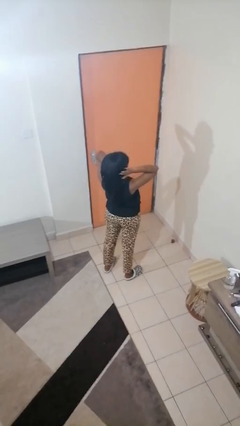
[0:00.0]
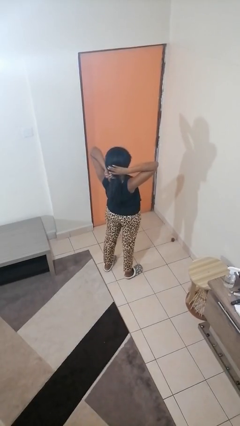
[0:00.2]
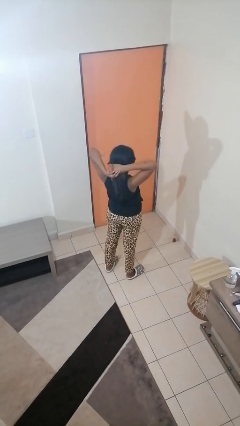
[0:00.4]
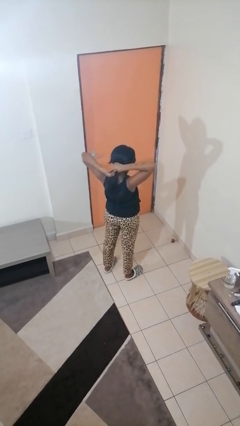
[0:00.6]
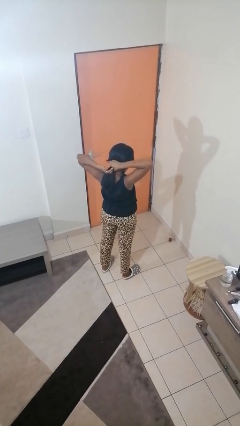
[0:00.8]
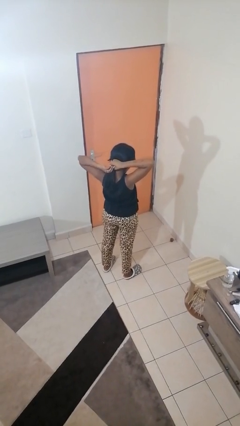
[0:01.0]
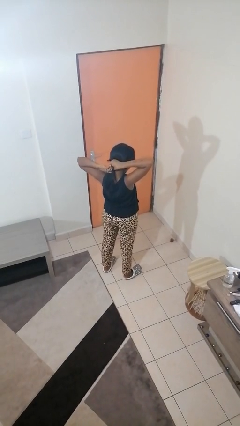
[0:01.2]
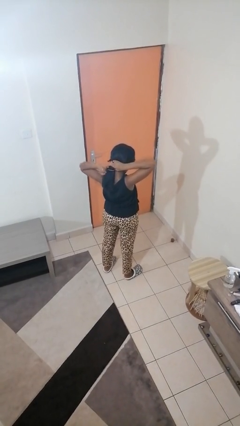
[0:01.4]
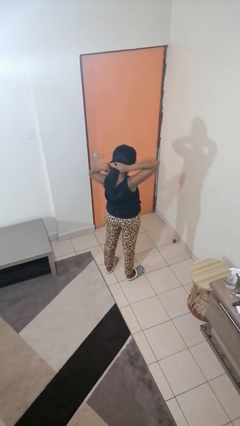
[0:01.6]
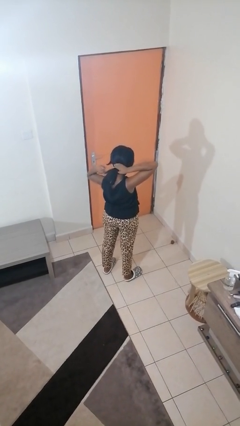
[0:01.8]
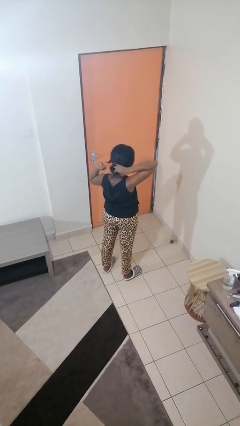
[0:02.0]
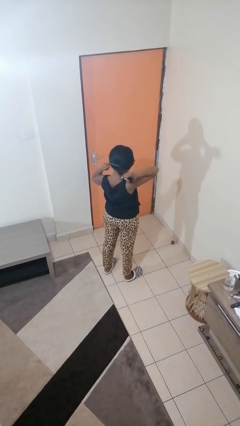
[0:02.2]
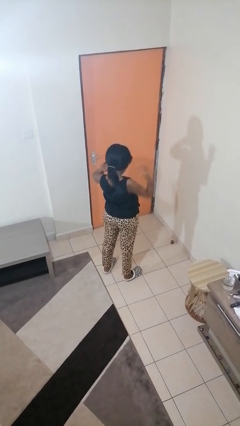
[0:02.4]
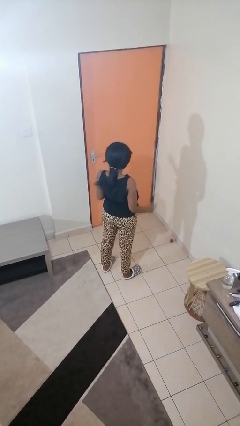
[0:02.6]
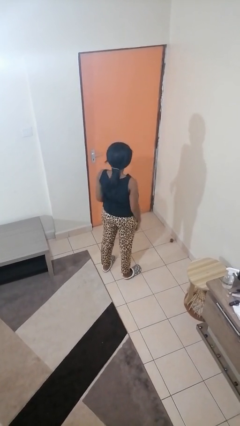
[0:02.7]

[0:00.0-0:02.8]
person puts hair in ponytail

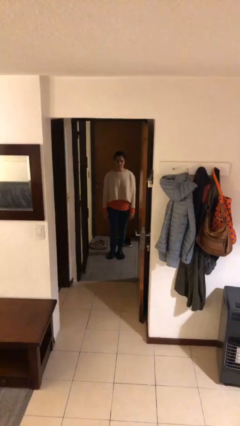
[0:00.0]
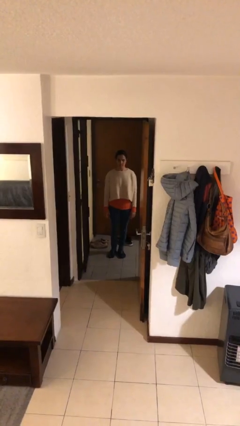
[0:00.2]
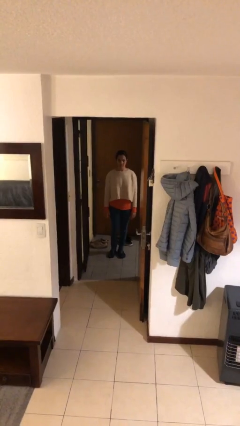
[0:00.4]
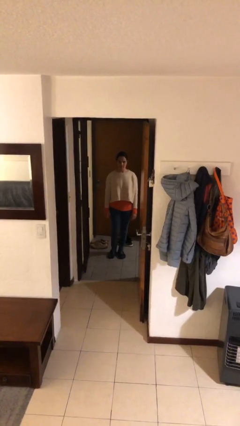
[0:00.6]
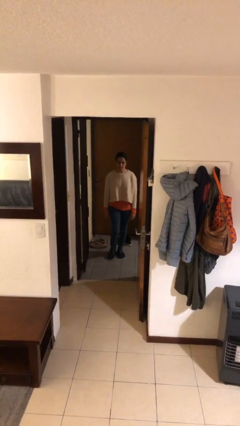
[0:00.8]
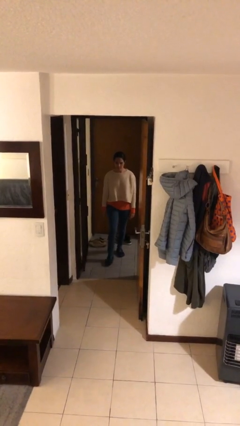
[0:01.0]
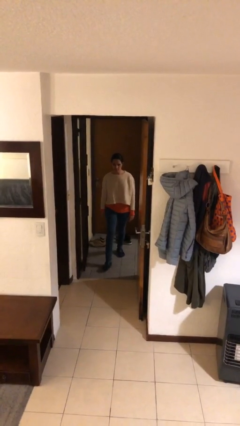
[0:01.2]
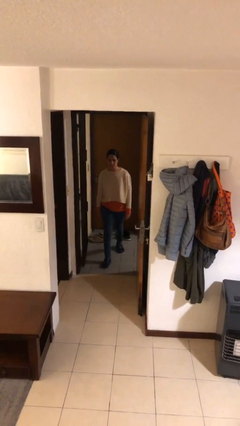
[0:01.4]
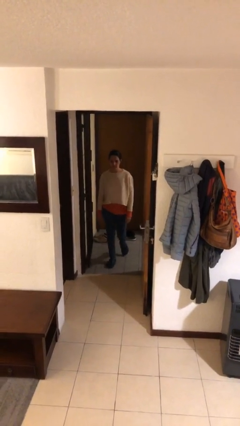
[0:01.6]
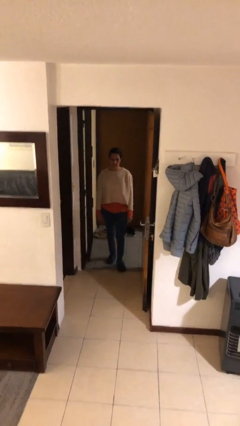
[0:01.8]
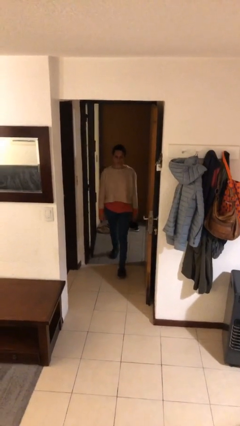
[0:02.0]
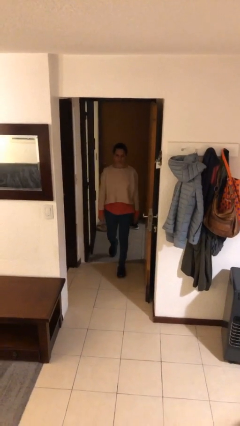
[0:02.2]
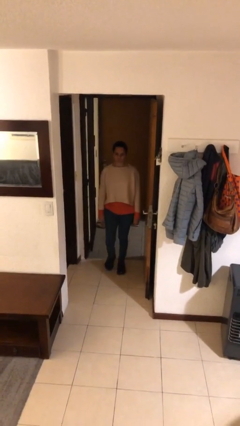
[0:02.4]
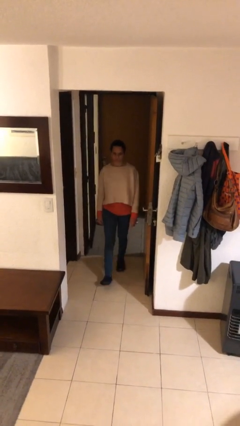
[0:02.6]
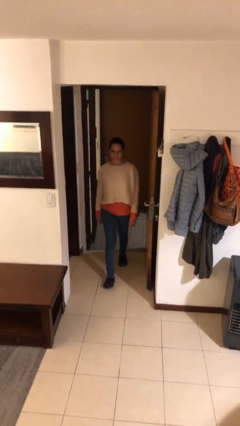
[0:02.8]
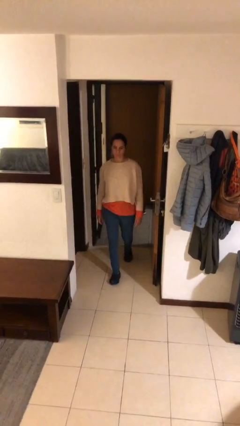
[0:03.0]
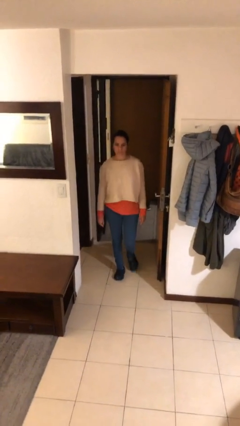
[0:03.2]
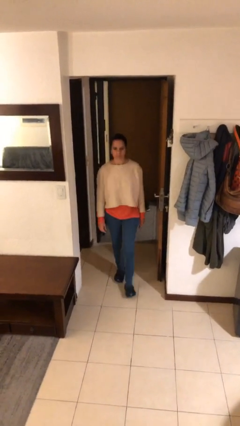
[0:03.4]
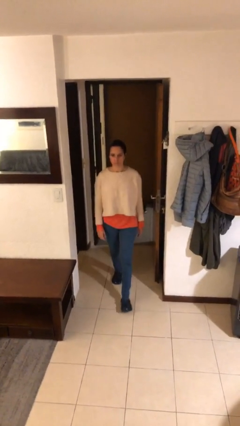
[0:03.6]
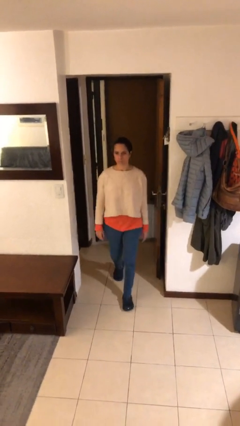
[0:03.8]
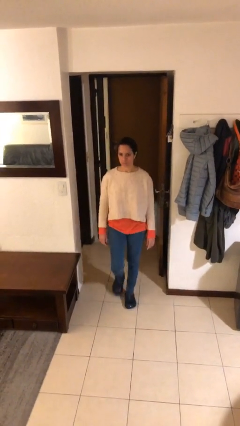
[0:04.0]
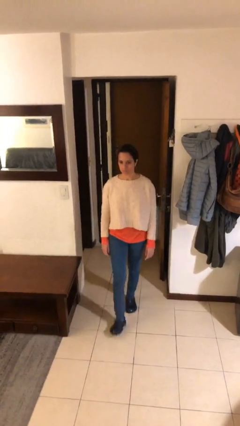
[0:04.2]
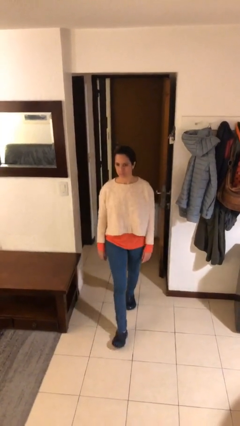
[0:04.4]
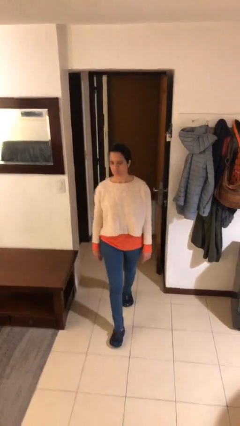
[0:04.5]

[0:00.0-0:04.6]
person enters scene through structure

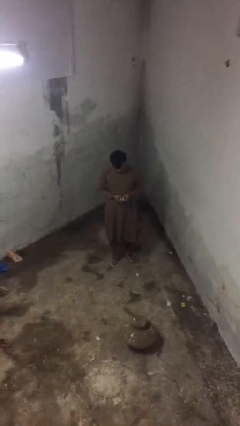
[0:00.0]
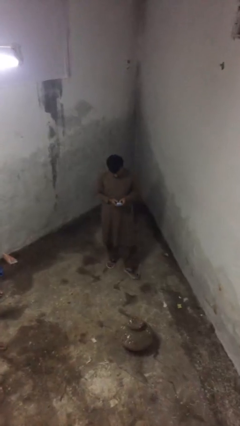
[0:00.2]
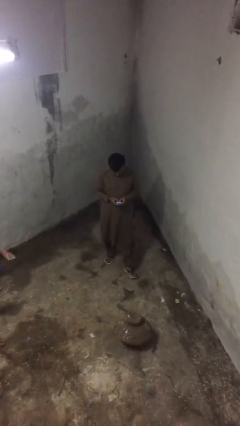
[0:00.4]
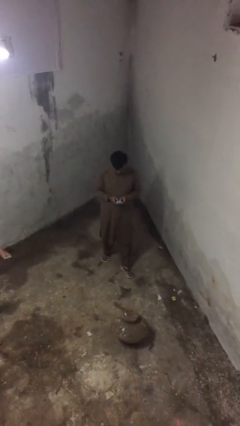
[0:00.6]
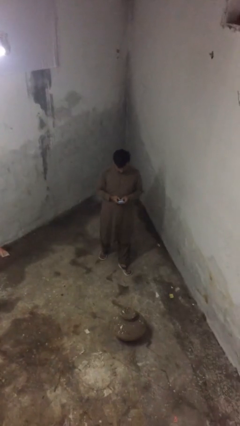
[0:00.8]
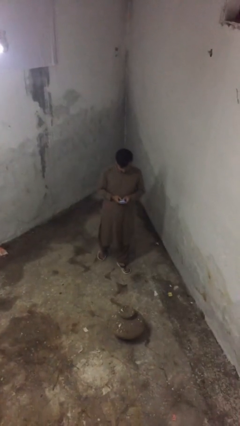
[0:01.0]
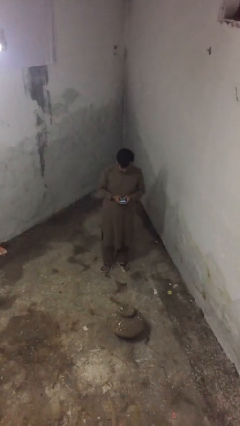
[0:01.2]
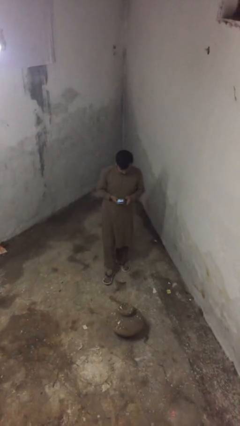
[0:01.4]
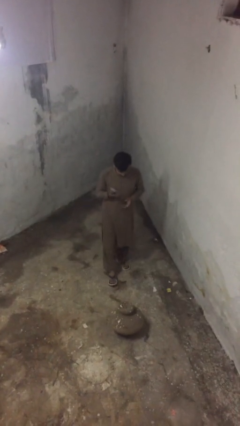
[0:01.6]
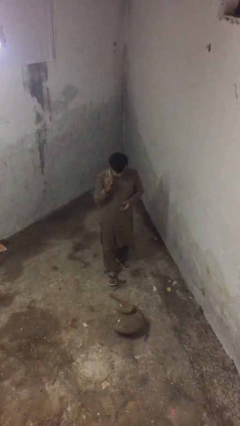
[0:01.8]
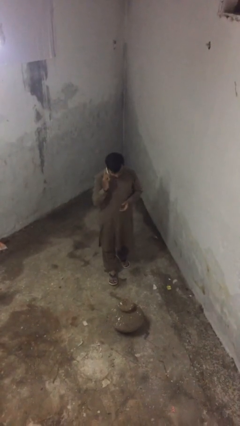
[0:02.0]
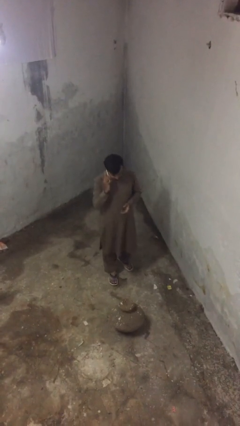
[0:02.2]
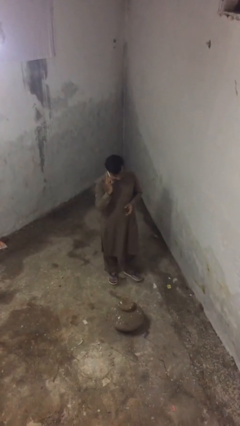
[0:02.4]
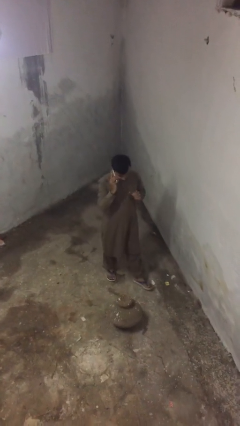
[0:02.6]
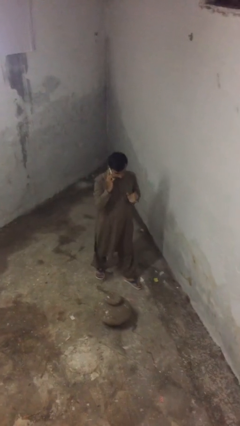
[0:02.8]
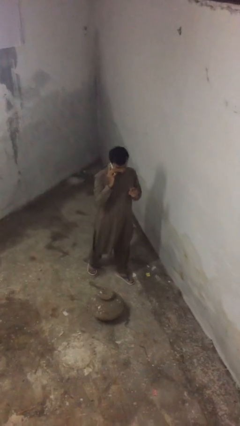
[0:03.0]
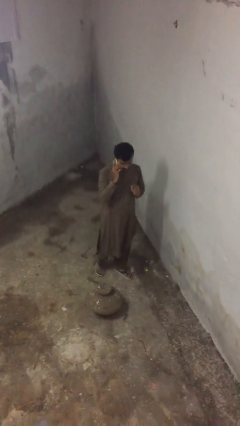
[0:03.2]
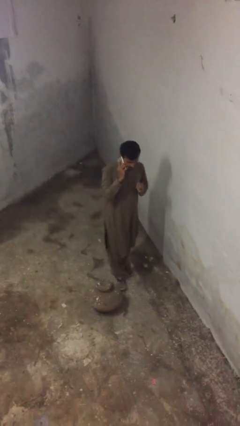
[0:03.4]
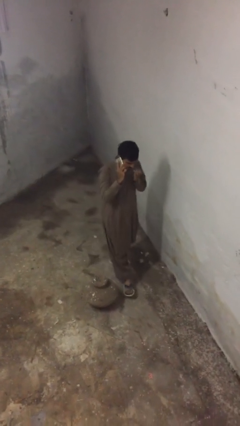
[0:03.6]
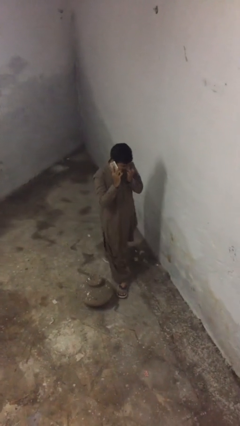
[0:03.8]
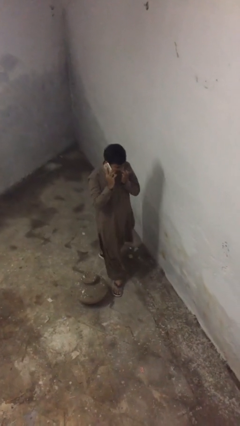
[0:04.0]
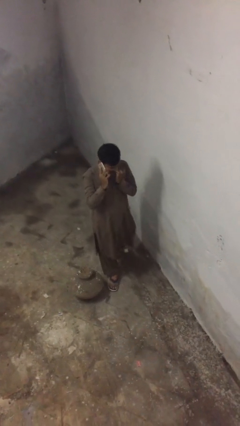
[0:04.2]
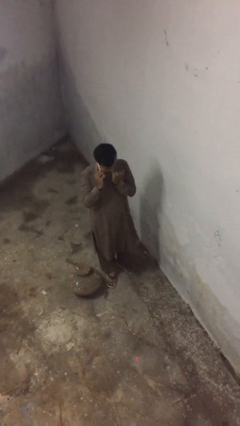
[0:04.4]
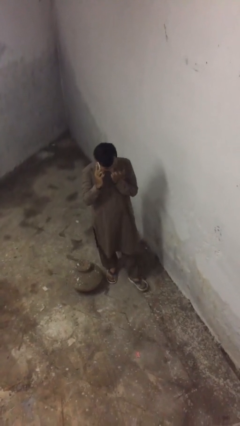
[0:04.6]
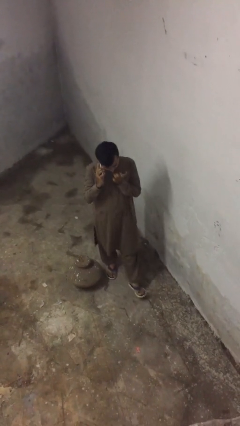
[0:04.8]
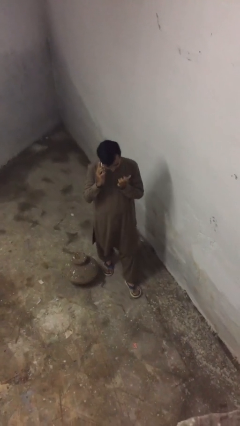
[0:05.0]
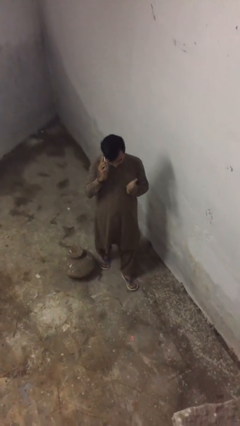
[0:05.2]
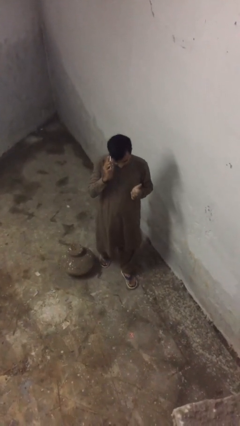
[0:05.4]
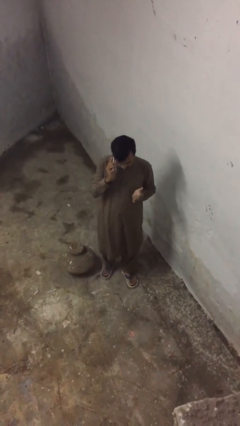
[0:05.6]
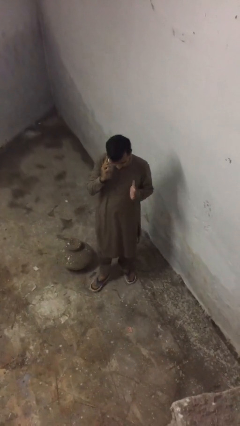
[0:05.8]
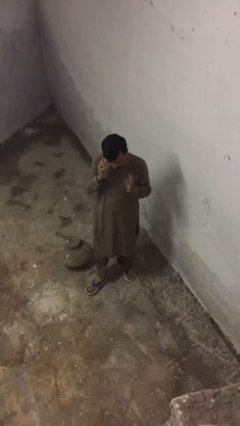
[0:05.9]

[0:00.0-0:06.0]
person talks on phone

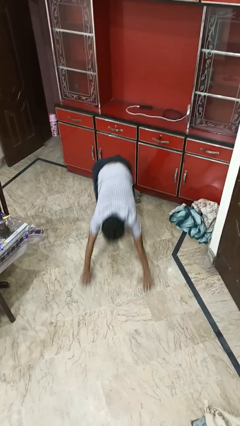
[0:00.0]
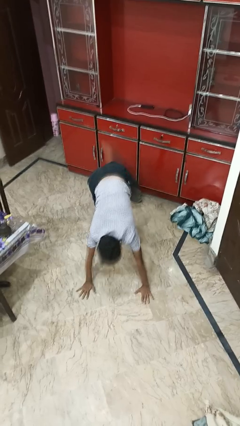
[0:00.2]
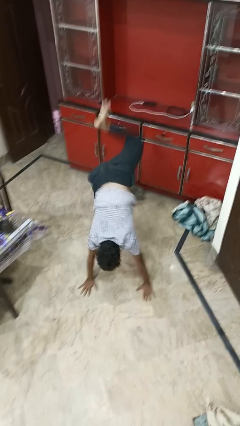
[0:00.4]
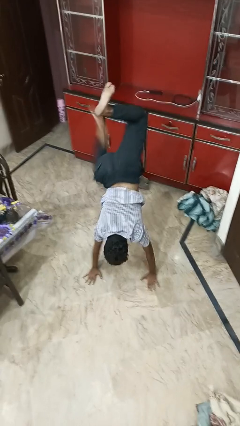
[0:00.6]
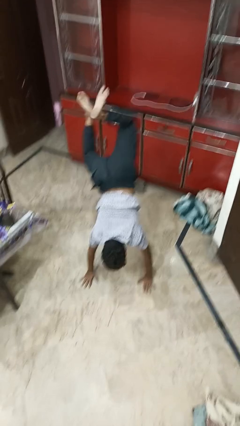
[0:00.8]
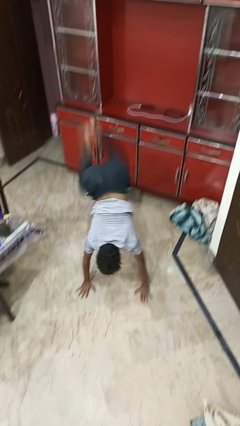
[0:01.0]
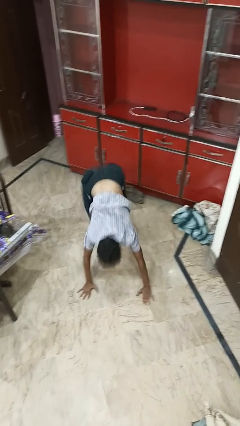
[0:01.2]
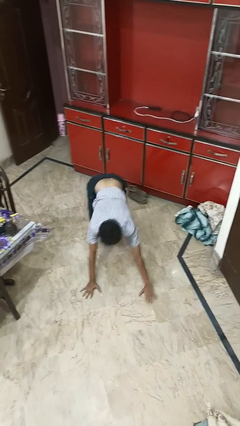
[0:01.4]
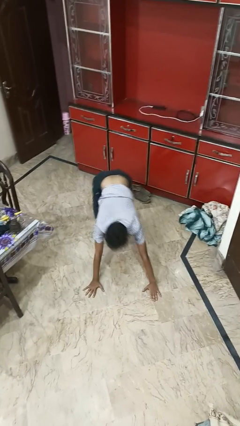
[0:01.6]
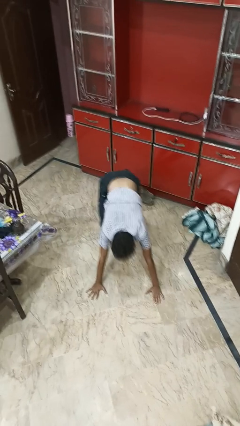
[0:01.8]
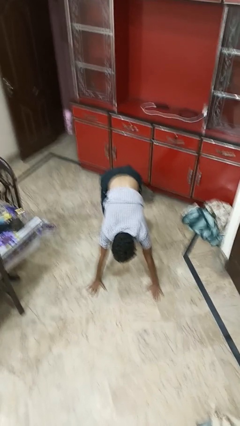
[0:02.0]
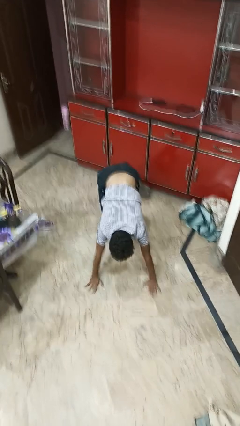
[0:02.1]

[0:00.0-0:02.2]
person handstand

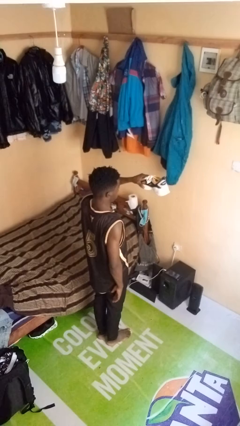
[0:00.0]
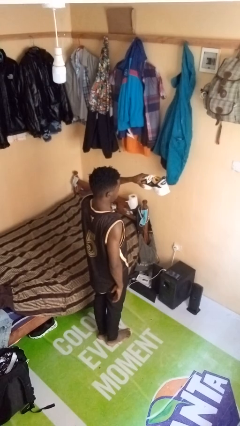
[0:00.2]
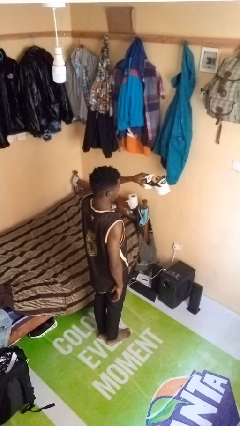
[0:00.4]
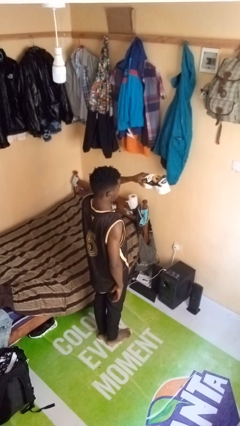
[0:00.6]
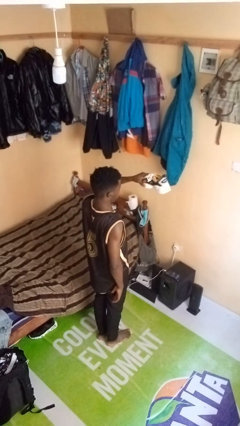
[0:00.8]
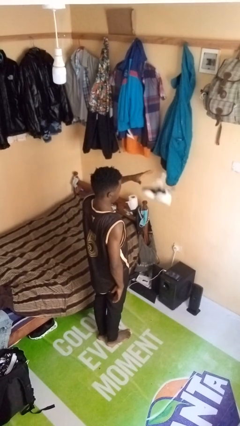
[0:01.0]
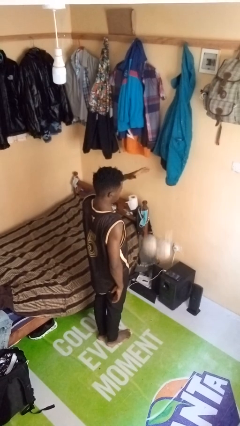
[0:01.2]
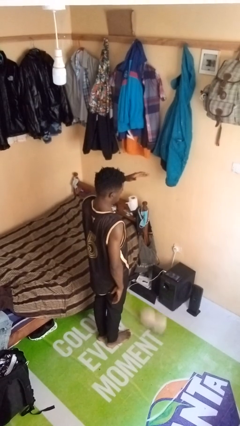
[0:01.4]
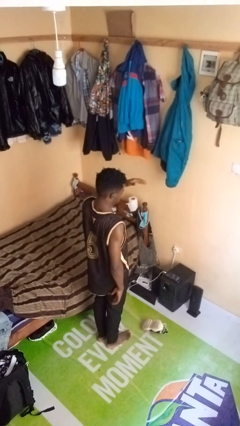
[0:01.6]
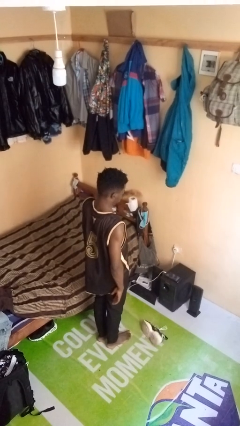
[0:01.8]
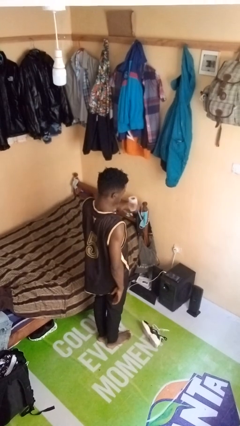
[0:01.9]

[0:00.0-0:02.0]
person drops object
